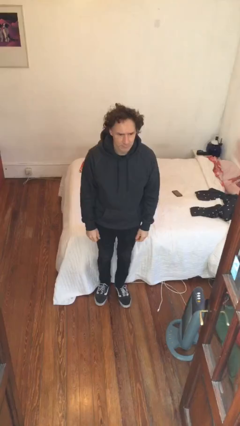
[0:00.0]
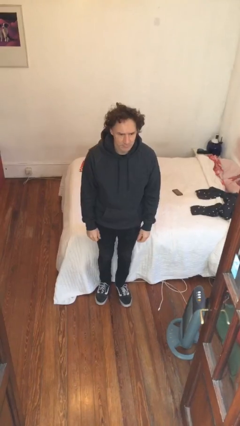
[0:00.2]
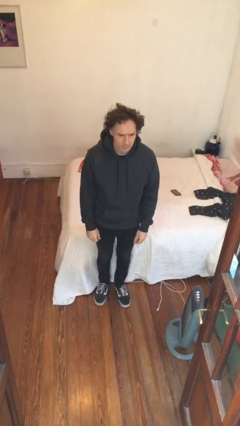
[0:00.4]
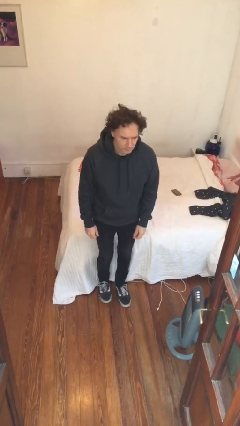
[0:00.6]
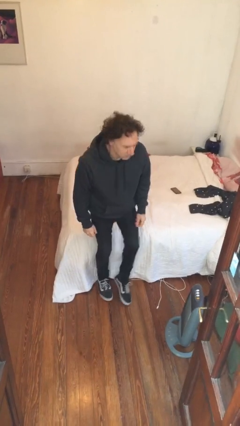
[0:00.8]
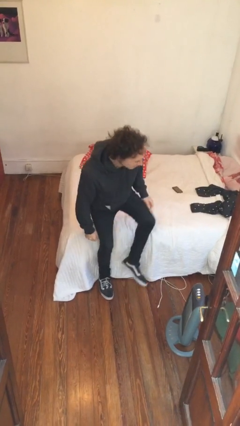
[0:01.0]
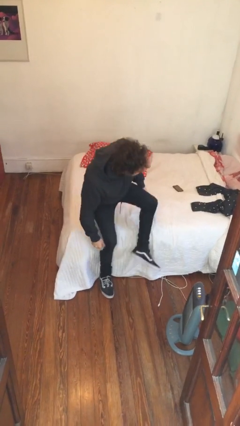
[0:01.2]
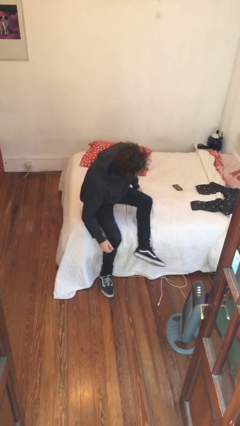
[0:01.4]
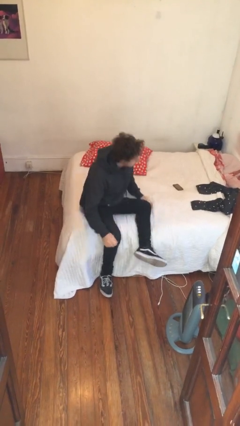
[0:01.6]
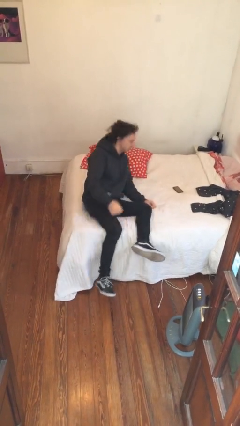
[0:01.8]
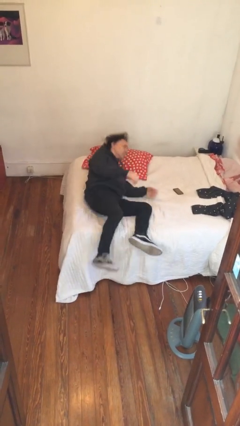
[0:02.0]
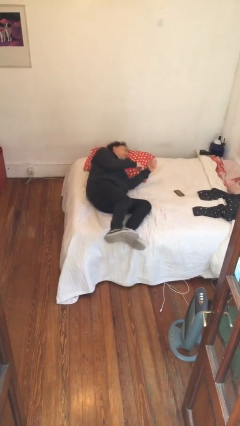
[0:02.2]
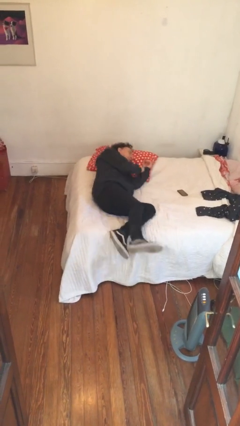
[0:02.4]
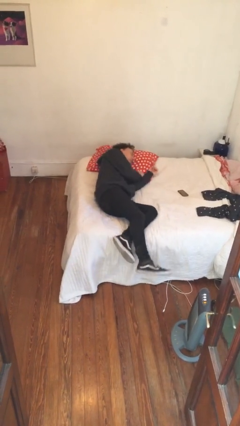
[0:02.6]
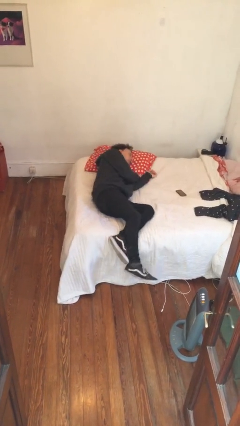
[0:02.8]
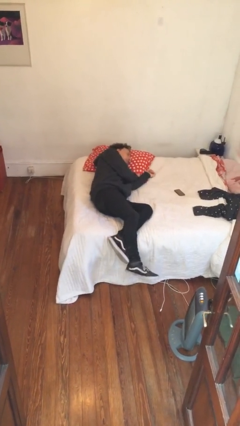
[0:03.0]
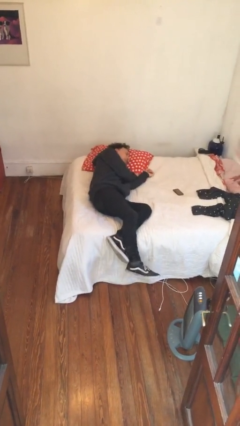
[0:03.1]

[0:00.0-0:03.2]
person lies down on bed

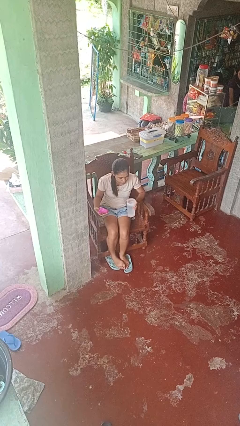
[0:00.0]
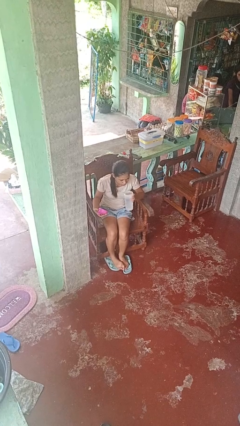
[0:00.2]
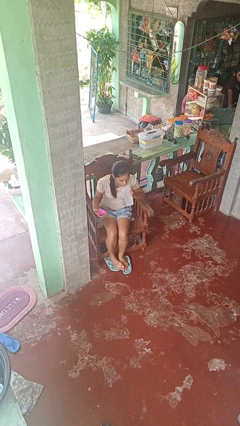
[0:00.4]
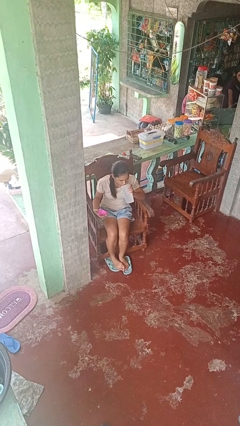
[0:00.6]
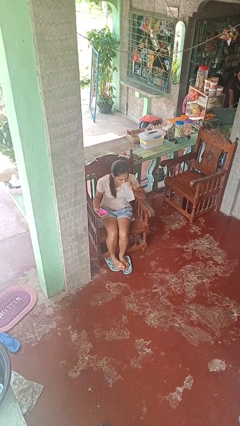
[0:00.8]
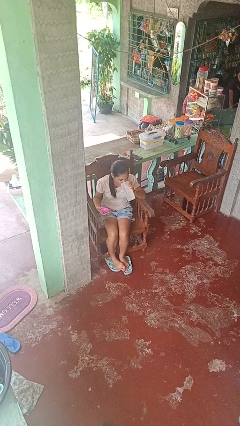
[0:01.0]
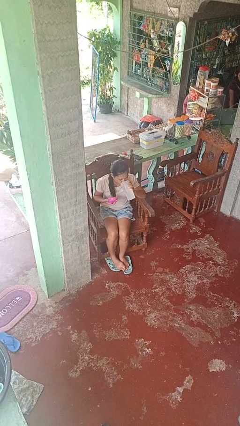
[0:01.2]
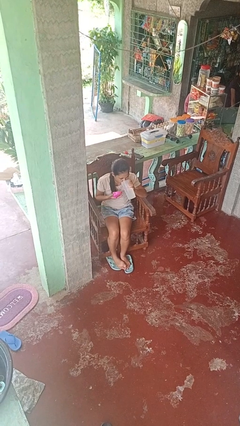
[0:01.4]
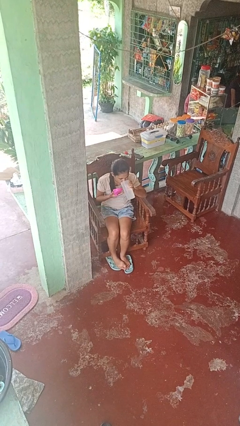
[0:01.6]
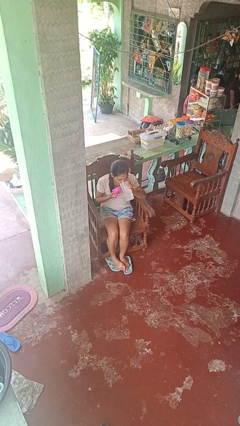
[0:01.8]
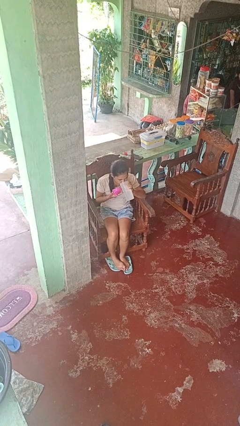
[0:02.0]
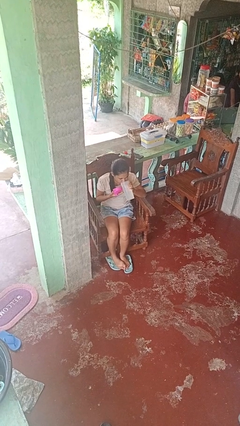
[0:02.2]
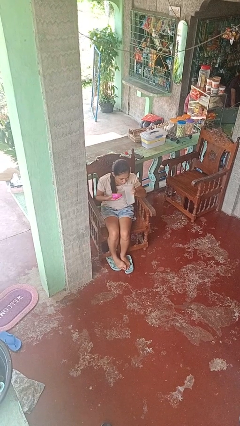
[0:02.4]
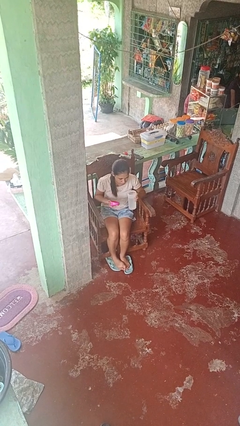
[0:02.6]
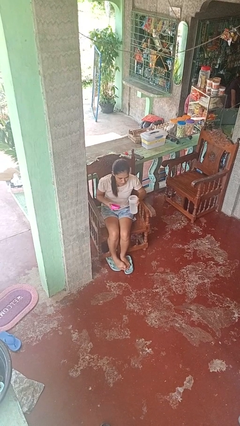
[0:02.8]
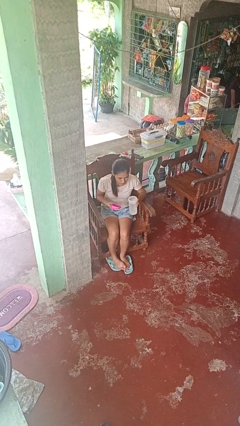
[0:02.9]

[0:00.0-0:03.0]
person drinks from bottle

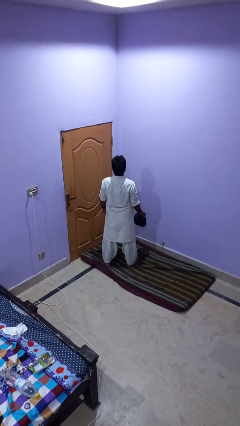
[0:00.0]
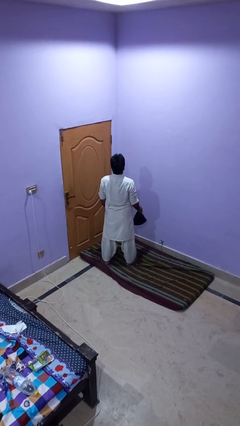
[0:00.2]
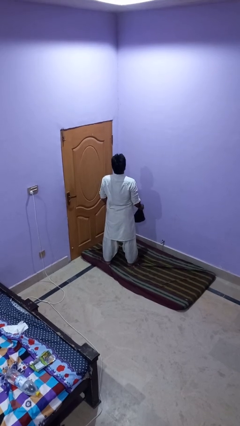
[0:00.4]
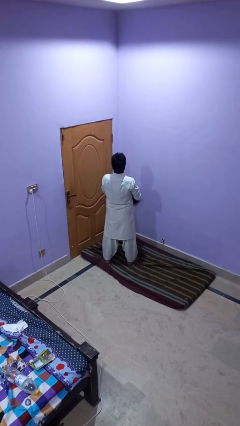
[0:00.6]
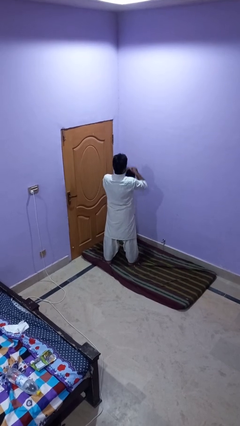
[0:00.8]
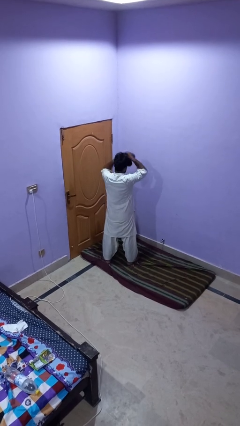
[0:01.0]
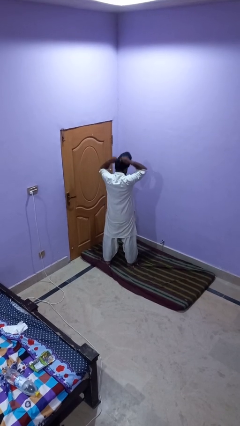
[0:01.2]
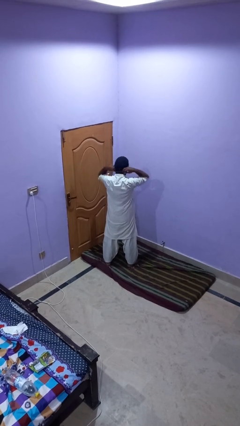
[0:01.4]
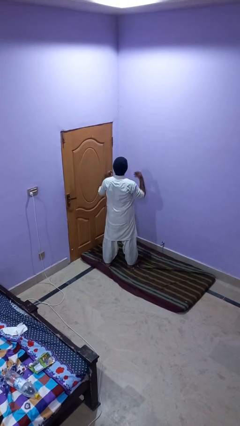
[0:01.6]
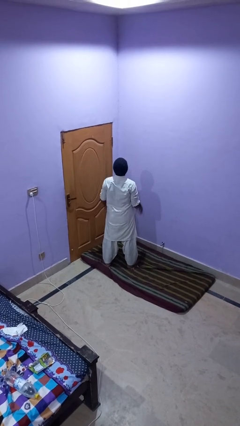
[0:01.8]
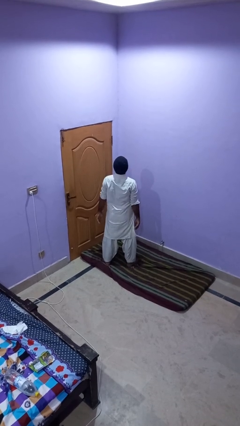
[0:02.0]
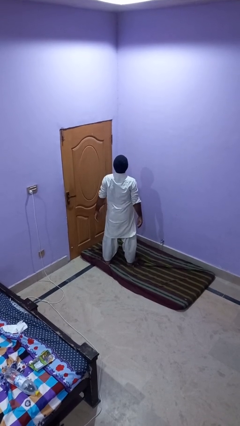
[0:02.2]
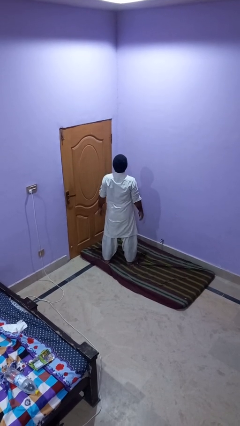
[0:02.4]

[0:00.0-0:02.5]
person puts on hat

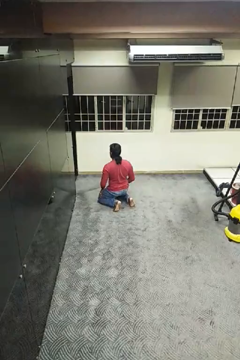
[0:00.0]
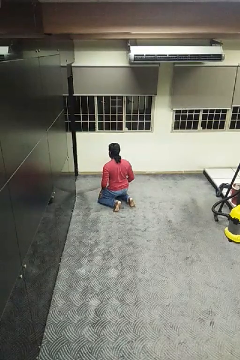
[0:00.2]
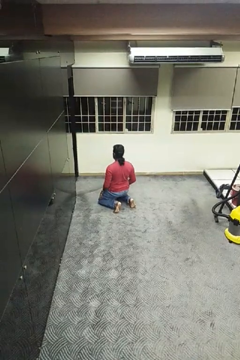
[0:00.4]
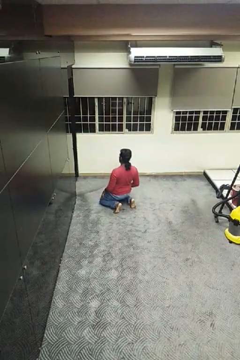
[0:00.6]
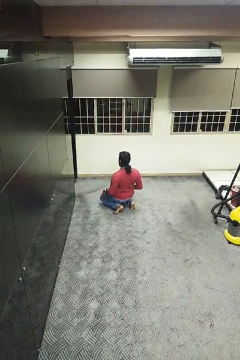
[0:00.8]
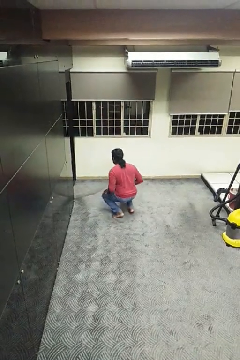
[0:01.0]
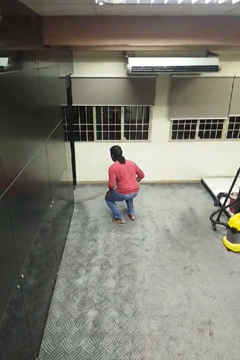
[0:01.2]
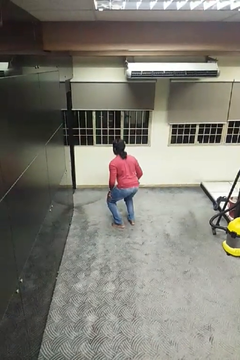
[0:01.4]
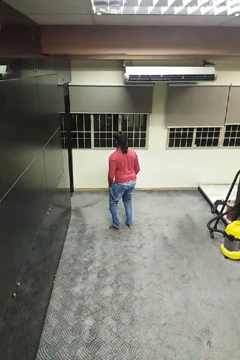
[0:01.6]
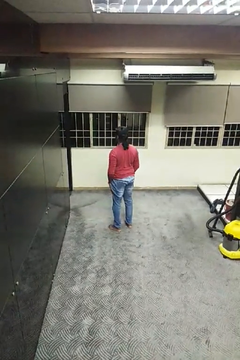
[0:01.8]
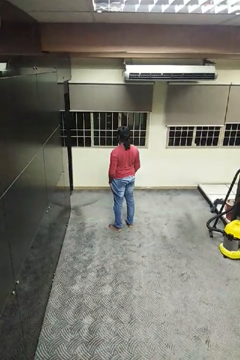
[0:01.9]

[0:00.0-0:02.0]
person stands up from floor

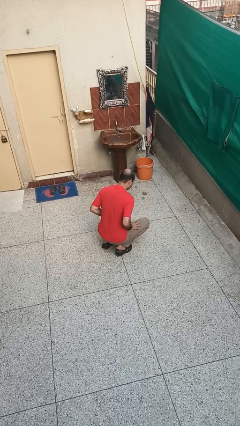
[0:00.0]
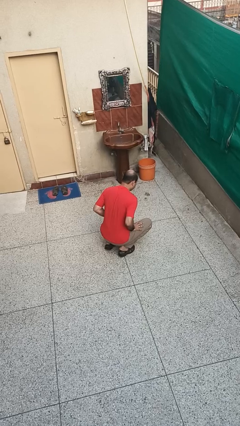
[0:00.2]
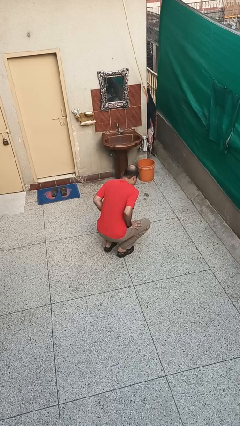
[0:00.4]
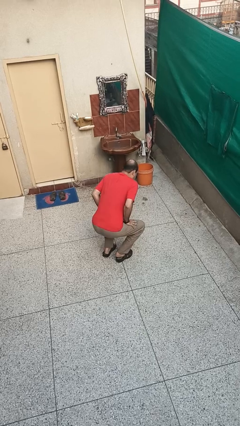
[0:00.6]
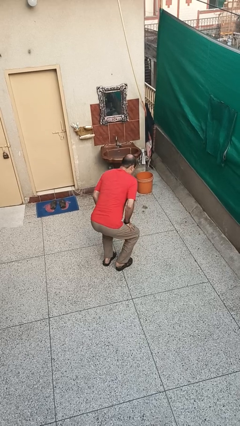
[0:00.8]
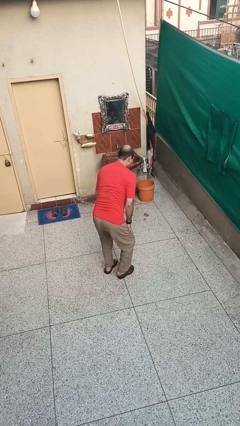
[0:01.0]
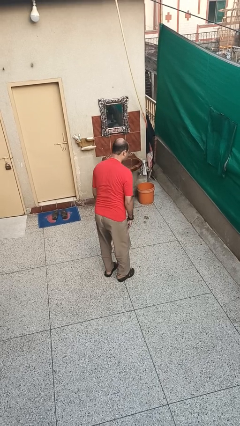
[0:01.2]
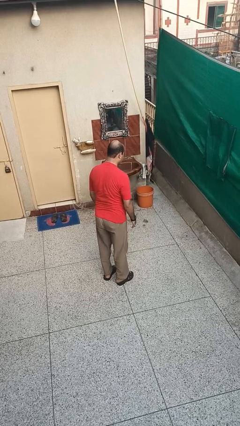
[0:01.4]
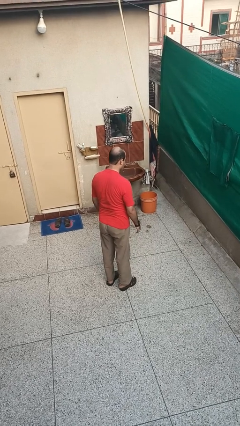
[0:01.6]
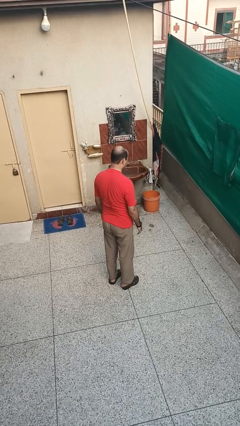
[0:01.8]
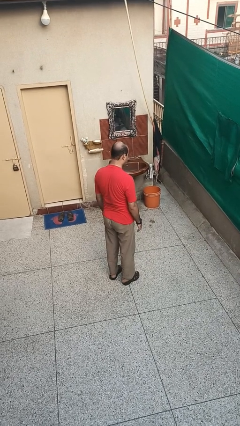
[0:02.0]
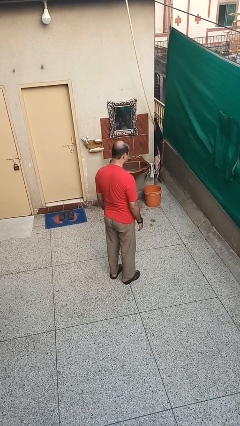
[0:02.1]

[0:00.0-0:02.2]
person stands up

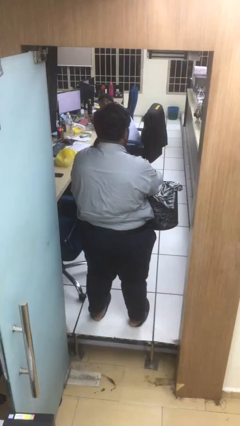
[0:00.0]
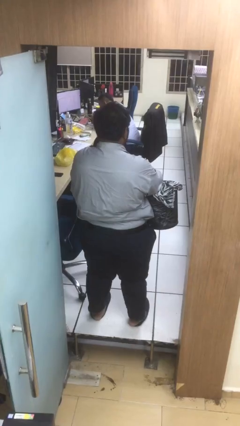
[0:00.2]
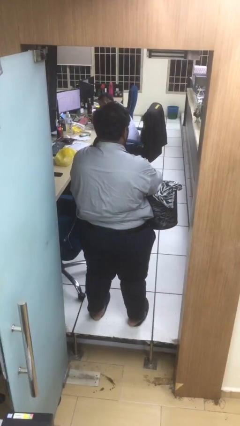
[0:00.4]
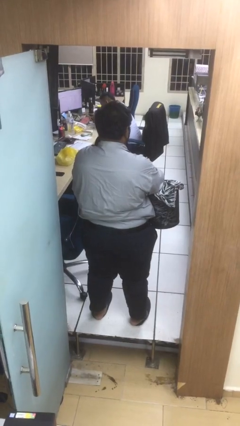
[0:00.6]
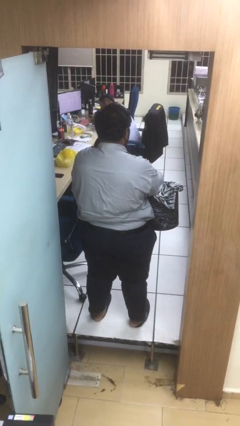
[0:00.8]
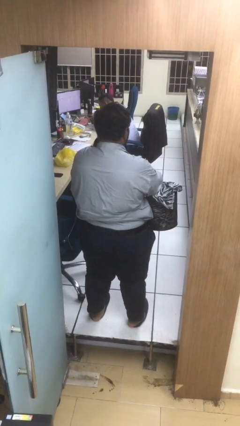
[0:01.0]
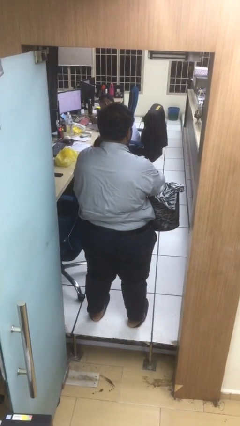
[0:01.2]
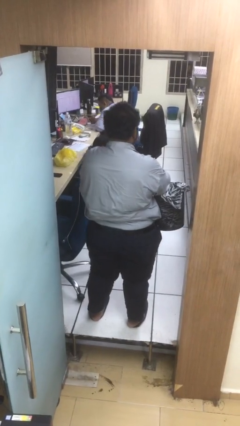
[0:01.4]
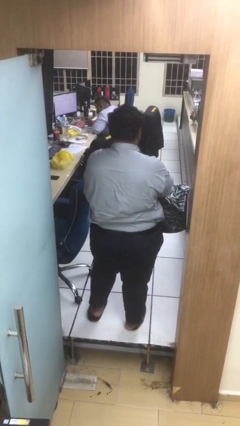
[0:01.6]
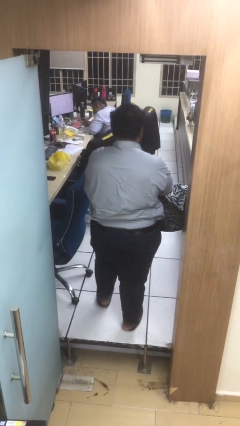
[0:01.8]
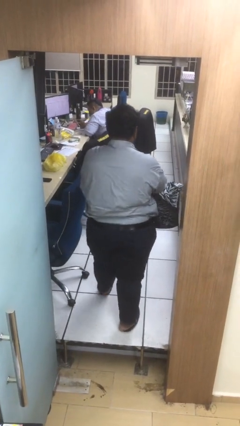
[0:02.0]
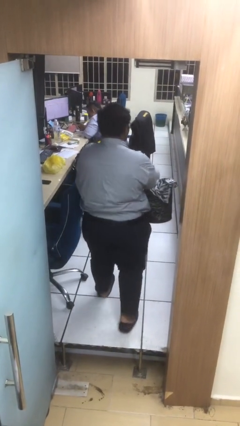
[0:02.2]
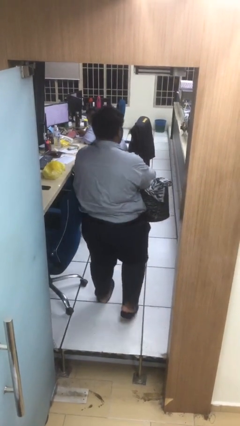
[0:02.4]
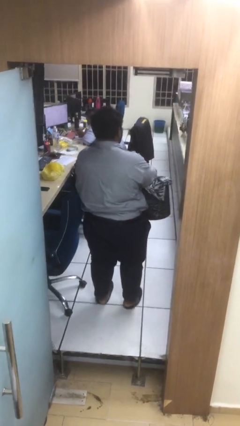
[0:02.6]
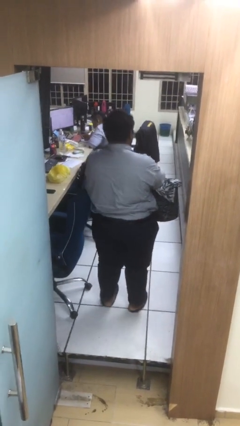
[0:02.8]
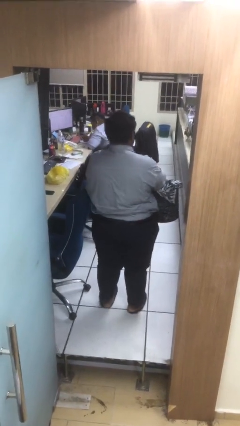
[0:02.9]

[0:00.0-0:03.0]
person carries laundry basket

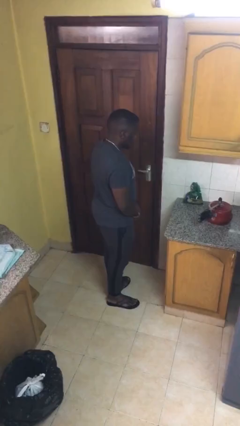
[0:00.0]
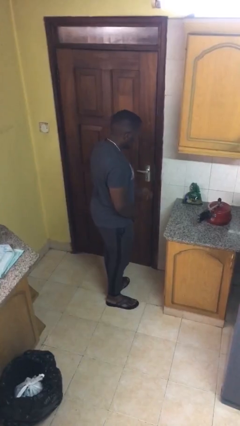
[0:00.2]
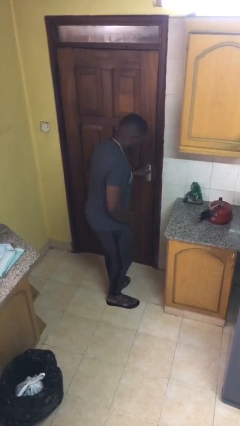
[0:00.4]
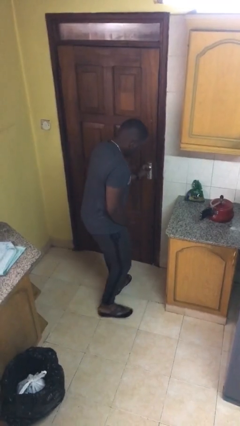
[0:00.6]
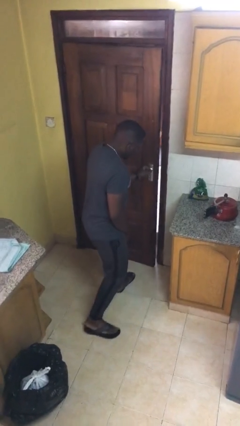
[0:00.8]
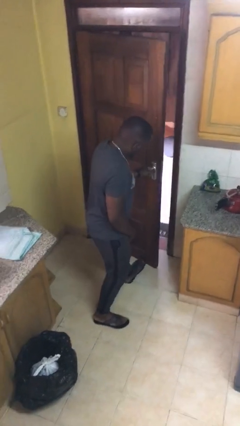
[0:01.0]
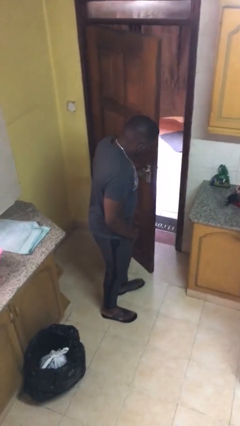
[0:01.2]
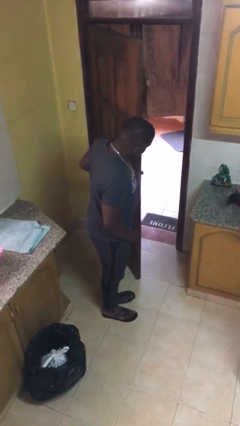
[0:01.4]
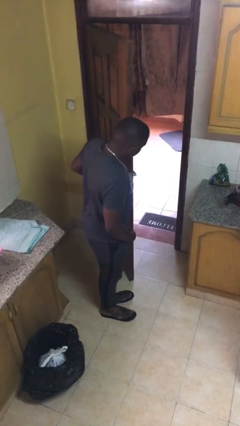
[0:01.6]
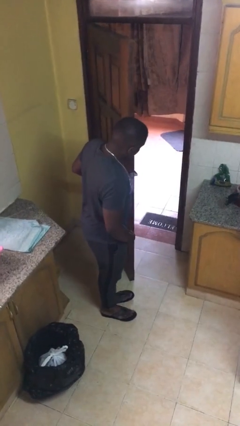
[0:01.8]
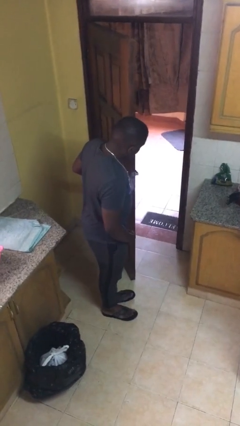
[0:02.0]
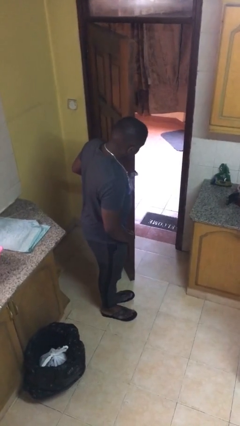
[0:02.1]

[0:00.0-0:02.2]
person opens facility door
